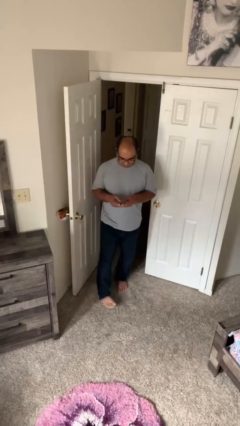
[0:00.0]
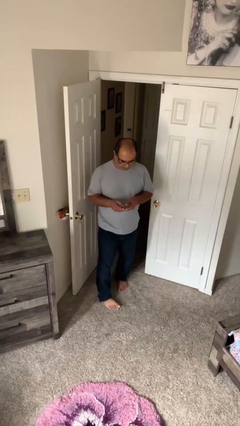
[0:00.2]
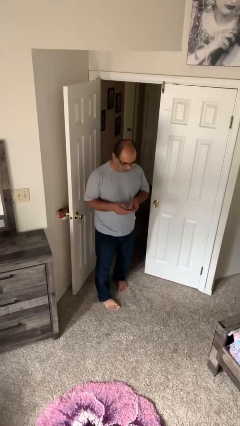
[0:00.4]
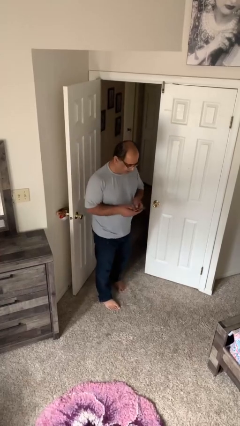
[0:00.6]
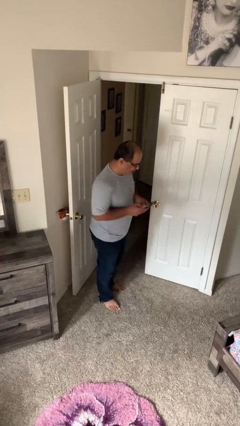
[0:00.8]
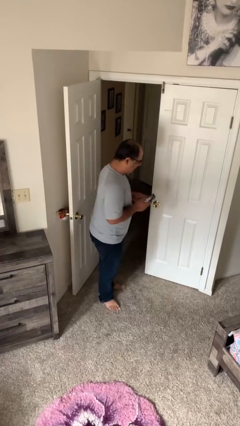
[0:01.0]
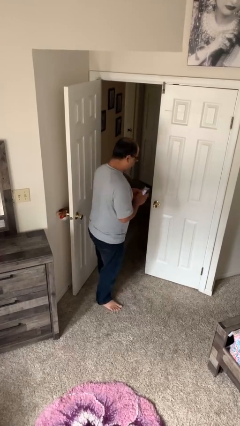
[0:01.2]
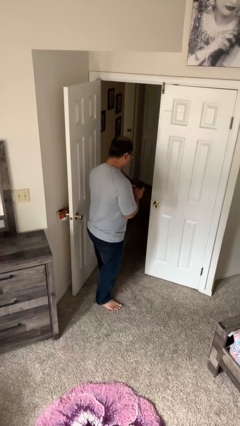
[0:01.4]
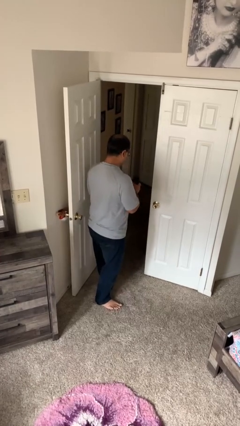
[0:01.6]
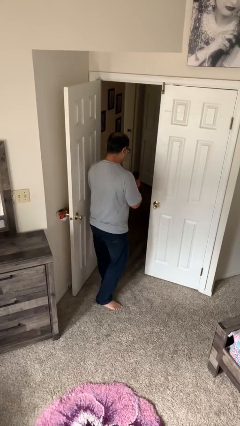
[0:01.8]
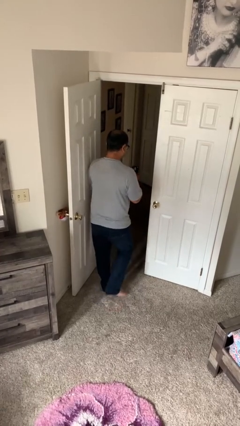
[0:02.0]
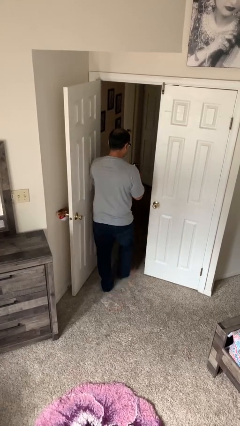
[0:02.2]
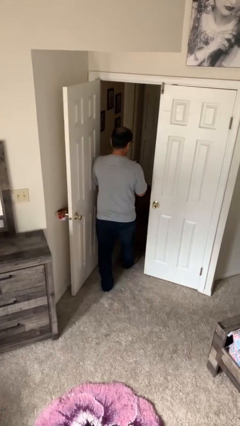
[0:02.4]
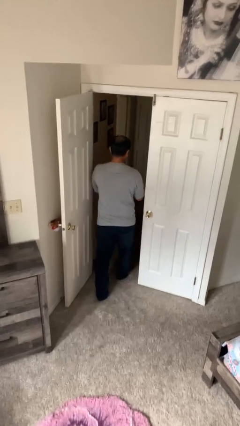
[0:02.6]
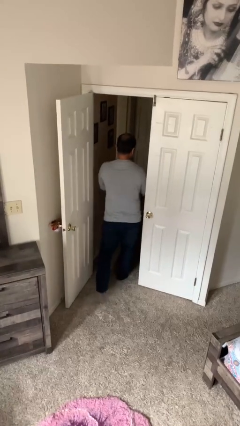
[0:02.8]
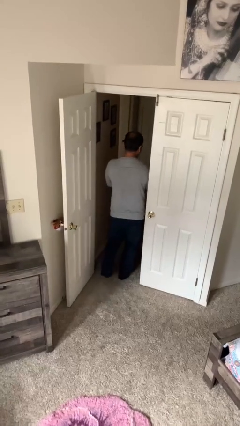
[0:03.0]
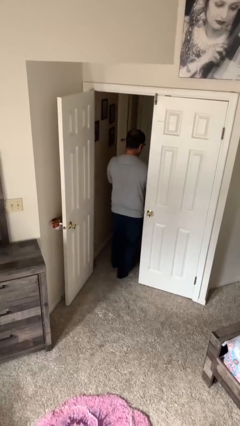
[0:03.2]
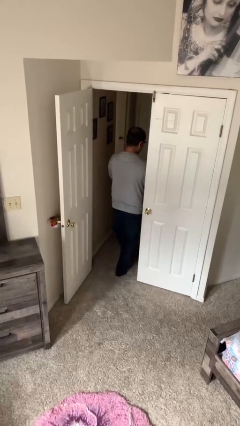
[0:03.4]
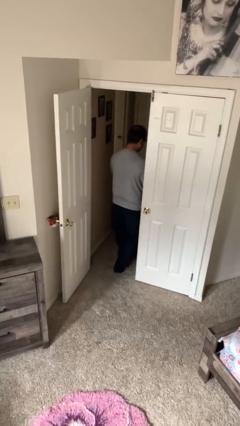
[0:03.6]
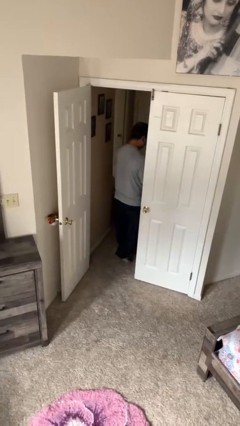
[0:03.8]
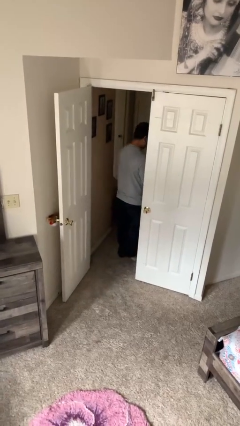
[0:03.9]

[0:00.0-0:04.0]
person exits scene through structure

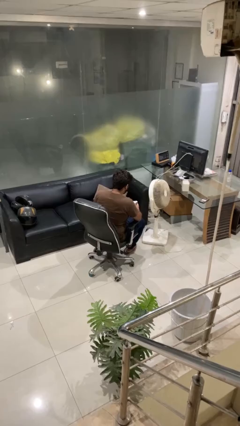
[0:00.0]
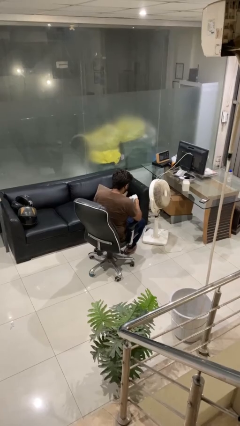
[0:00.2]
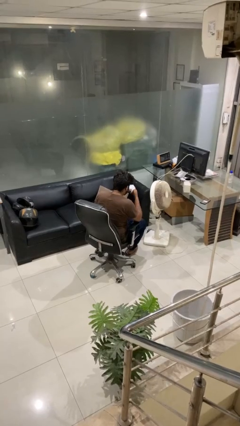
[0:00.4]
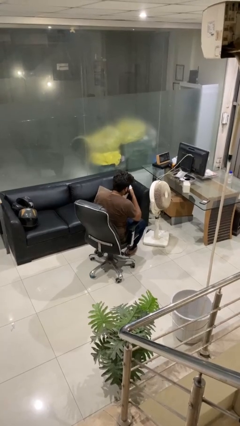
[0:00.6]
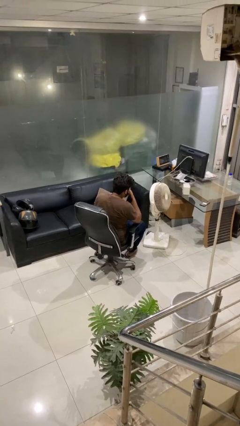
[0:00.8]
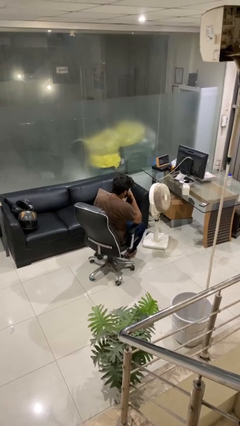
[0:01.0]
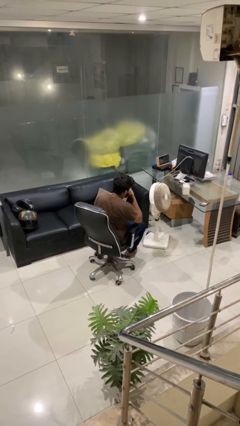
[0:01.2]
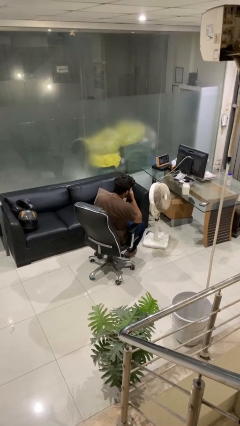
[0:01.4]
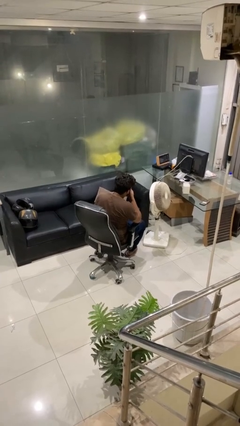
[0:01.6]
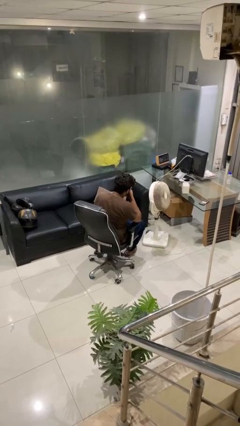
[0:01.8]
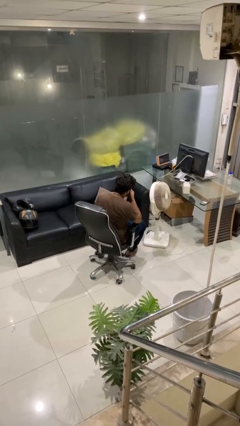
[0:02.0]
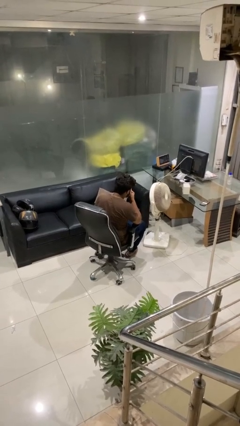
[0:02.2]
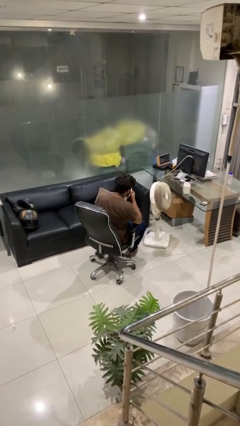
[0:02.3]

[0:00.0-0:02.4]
person blows nose

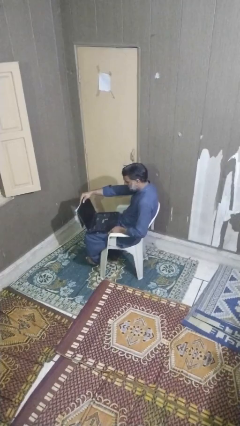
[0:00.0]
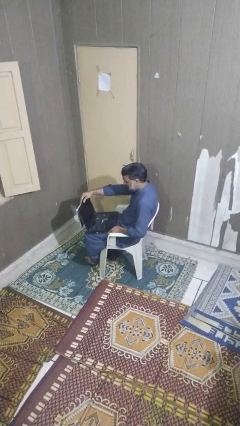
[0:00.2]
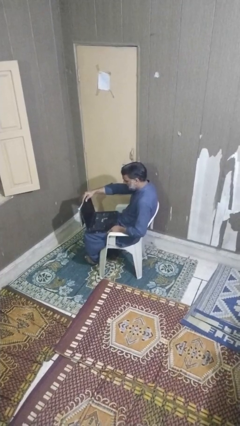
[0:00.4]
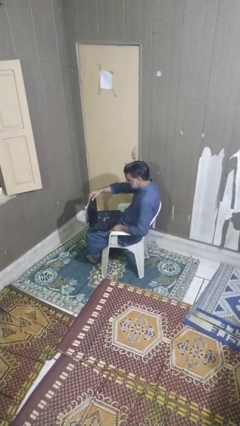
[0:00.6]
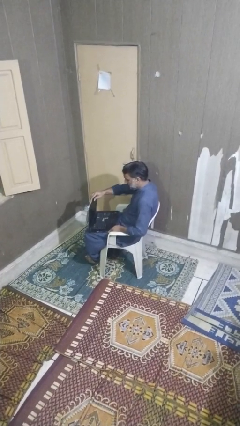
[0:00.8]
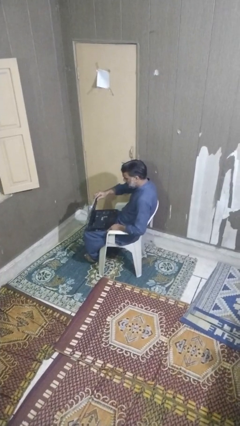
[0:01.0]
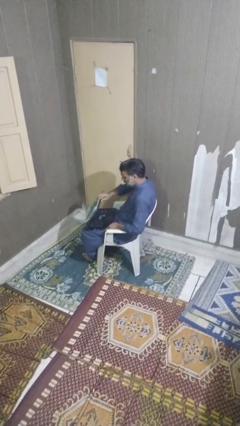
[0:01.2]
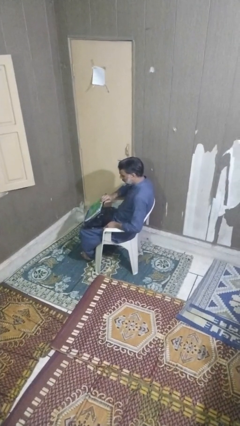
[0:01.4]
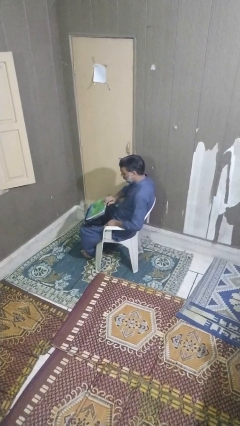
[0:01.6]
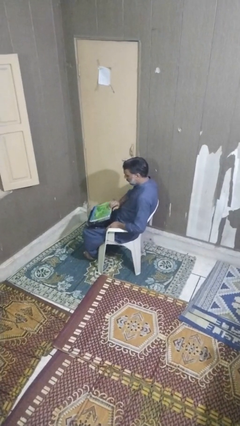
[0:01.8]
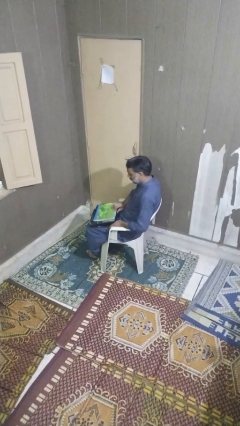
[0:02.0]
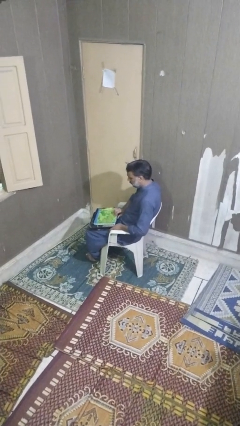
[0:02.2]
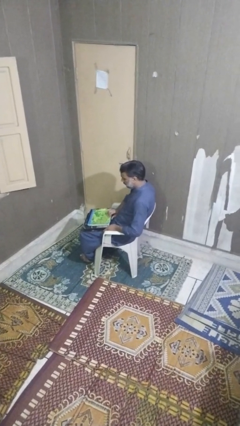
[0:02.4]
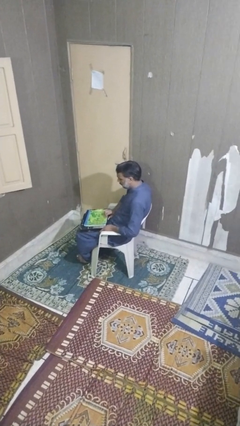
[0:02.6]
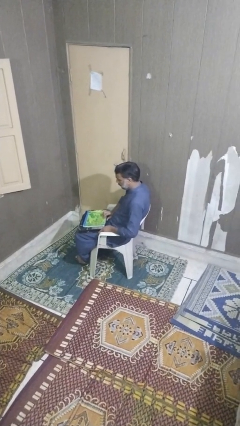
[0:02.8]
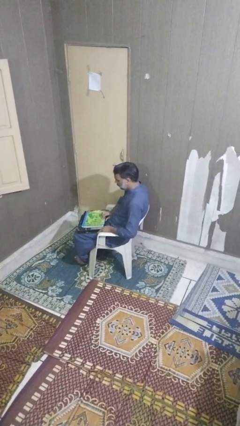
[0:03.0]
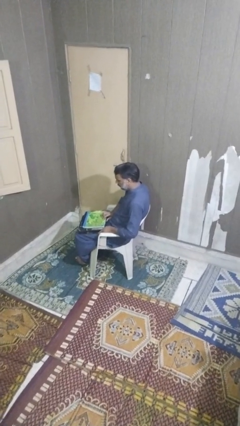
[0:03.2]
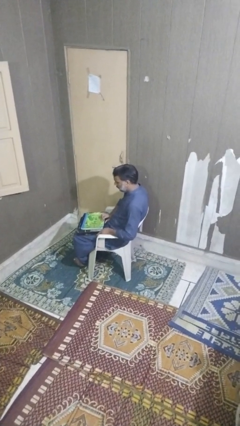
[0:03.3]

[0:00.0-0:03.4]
person closes laptop

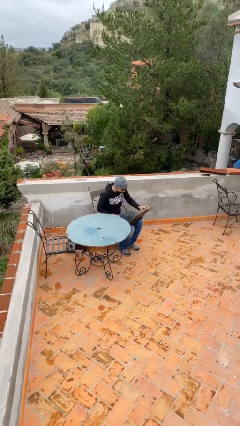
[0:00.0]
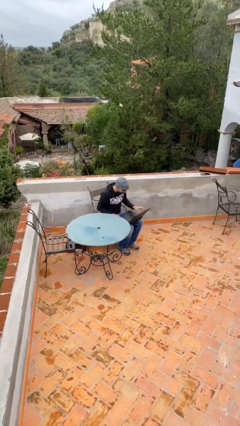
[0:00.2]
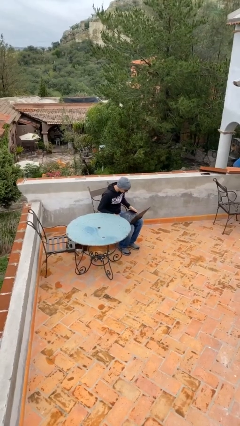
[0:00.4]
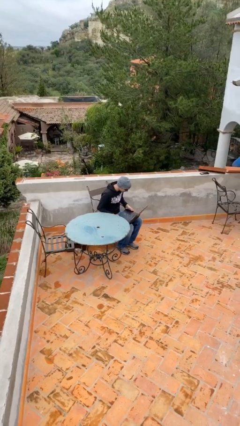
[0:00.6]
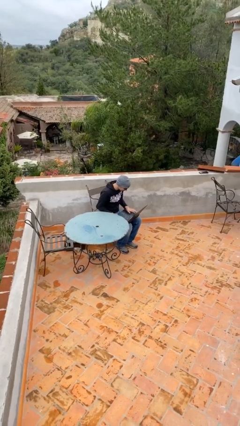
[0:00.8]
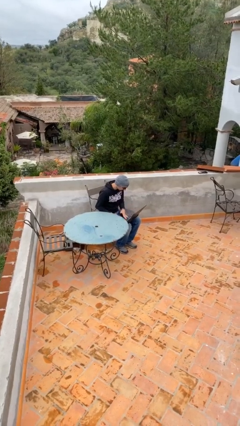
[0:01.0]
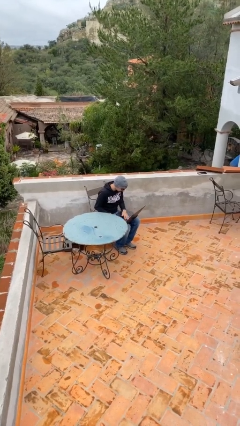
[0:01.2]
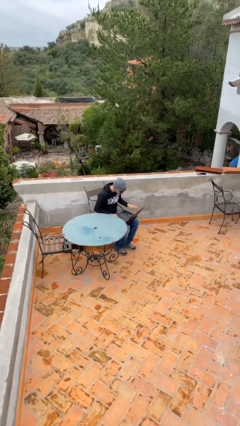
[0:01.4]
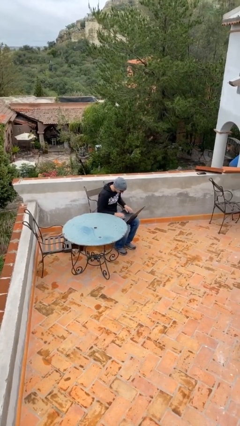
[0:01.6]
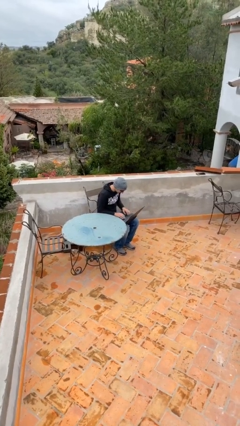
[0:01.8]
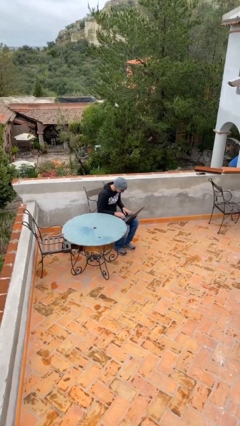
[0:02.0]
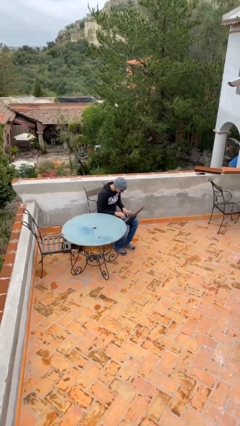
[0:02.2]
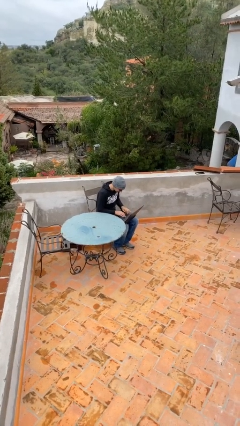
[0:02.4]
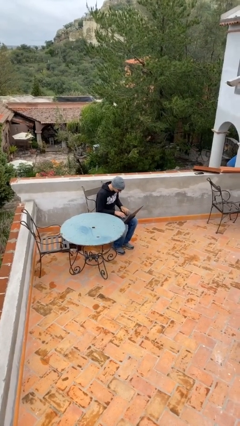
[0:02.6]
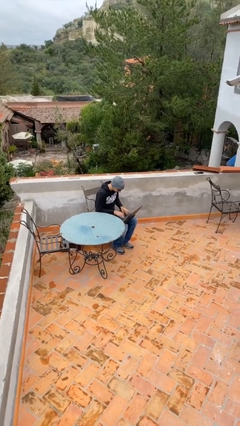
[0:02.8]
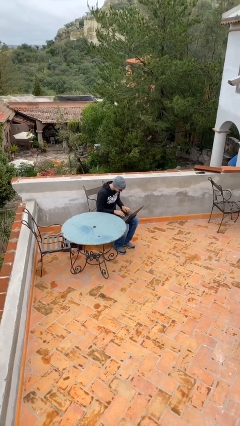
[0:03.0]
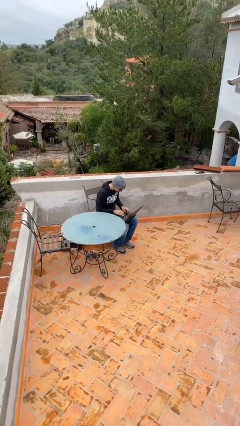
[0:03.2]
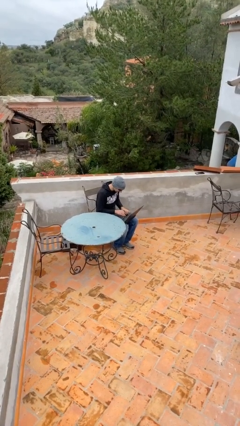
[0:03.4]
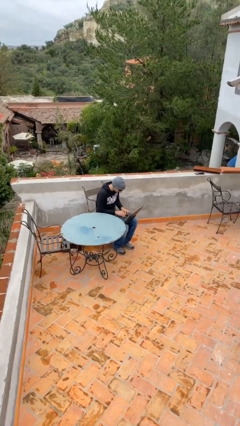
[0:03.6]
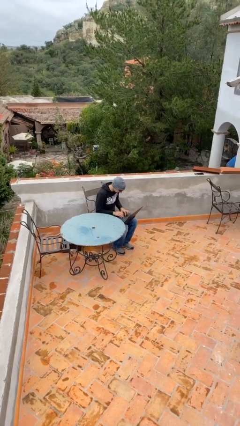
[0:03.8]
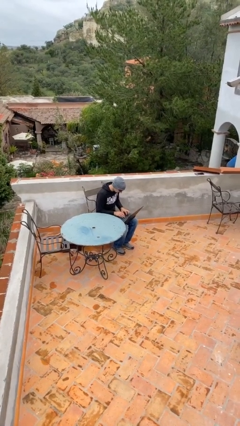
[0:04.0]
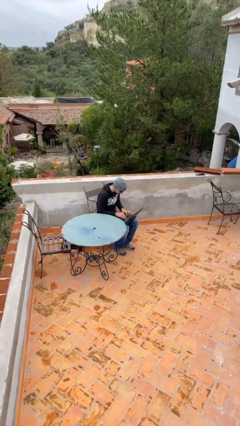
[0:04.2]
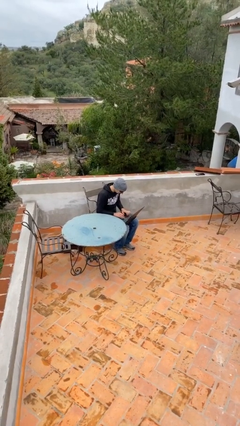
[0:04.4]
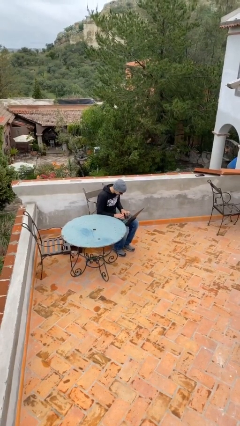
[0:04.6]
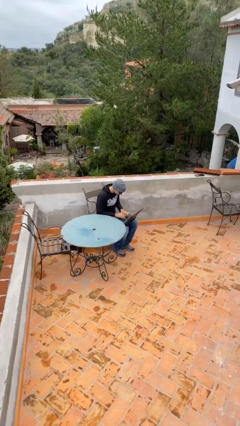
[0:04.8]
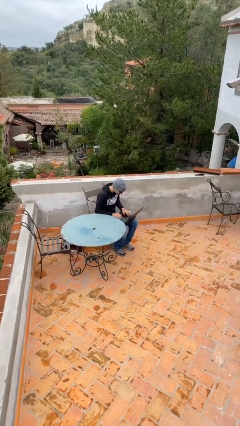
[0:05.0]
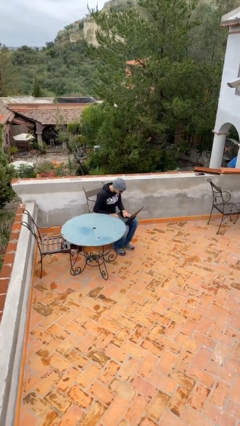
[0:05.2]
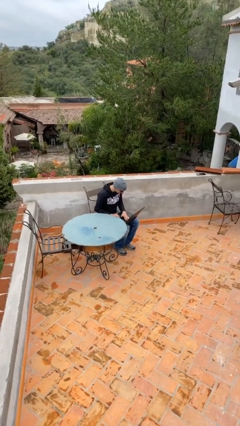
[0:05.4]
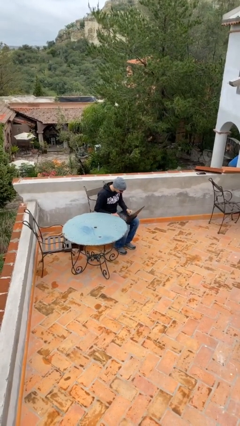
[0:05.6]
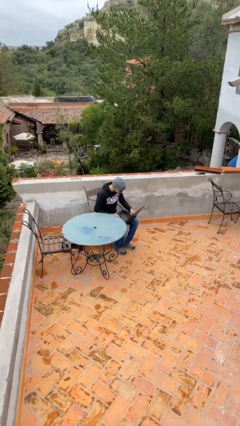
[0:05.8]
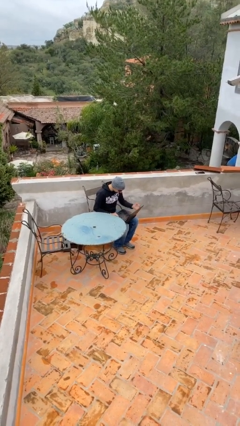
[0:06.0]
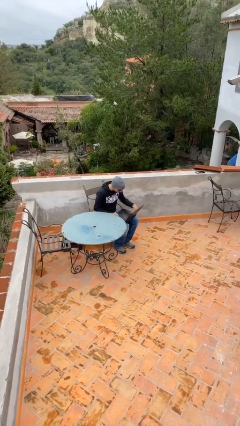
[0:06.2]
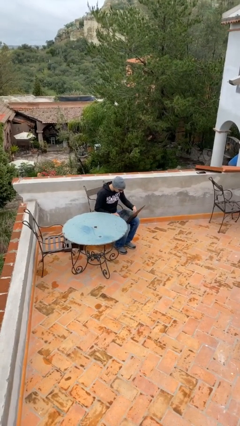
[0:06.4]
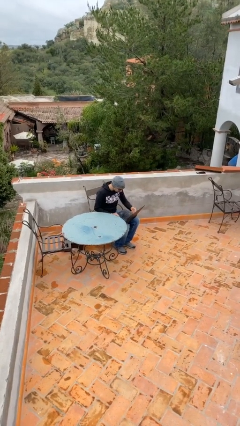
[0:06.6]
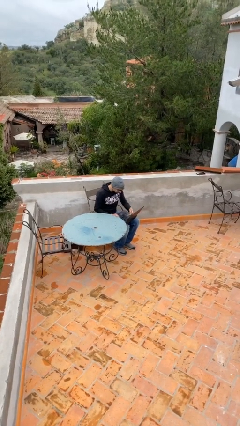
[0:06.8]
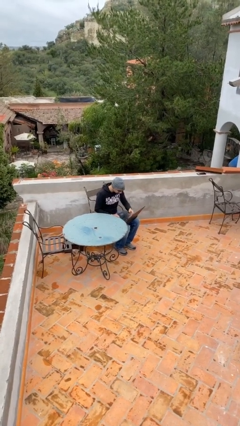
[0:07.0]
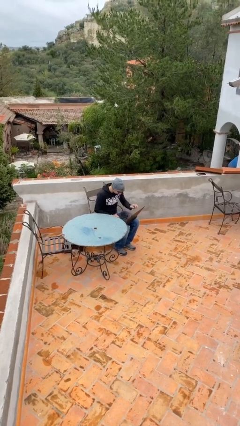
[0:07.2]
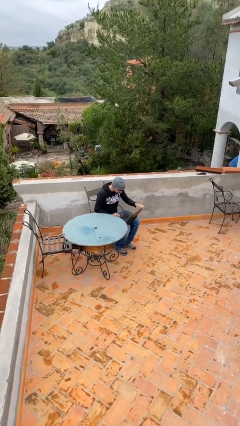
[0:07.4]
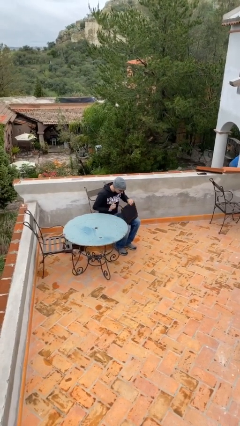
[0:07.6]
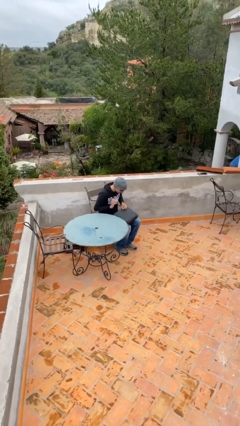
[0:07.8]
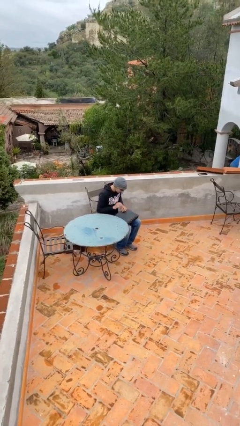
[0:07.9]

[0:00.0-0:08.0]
person interacts with laptop
